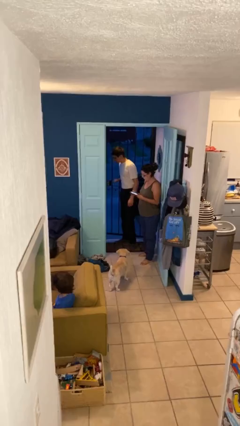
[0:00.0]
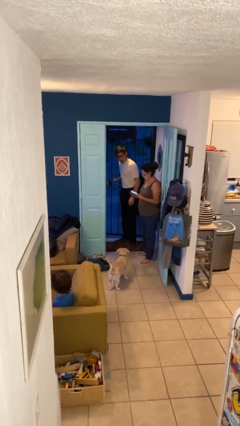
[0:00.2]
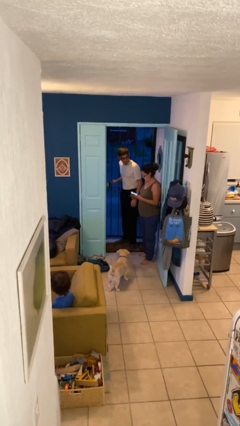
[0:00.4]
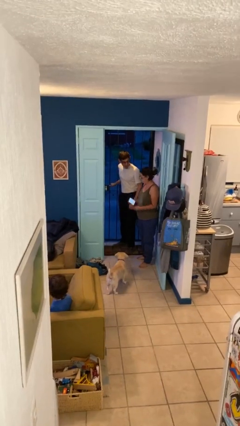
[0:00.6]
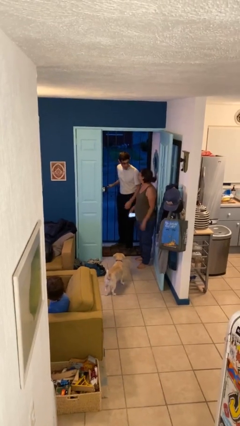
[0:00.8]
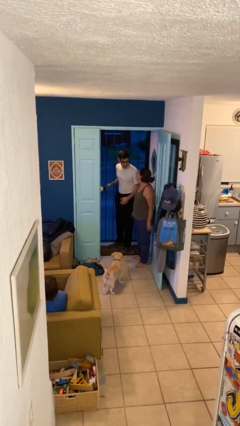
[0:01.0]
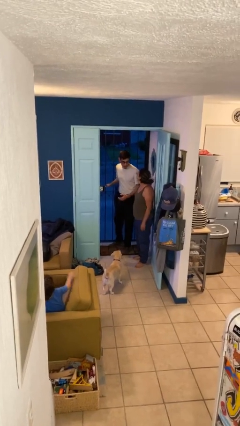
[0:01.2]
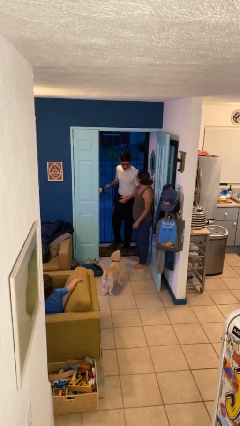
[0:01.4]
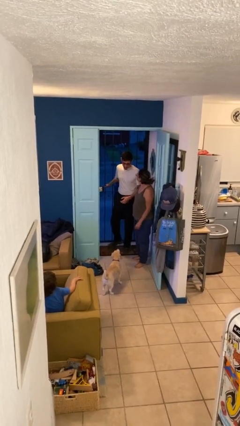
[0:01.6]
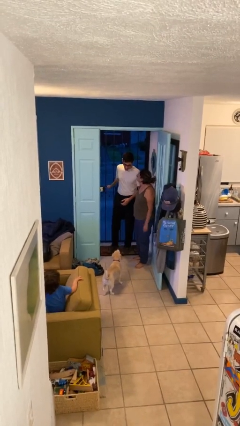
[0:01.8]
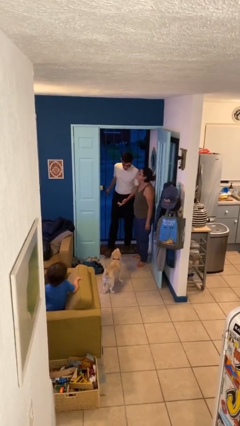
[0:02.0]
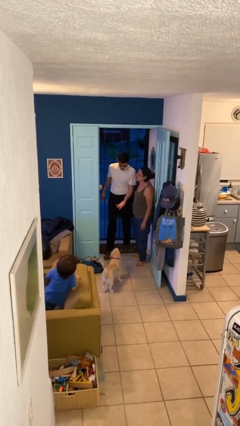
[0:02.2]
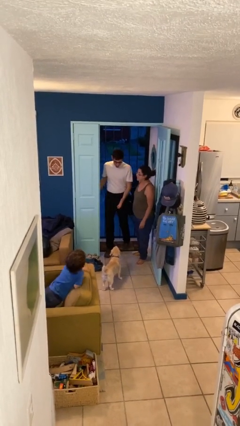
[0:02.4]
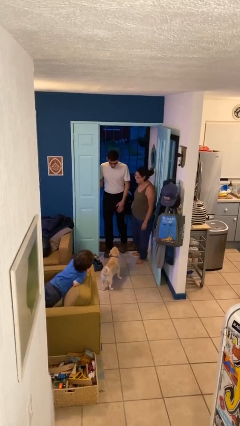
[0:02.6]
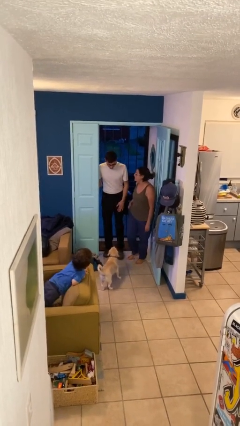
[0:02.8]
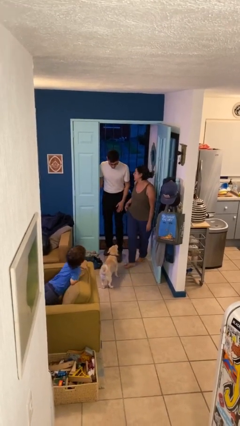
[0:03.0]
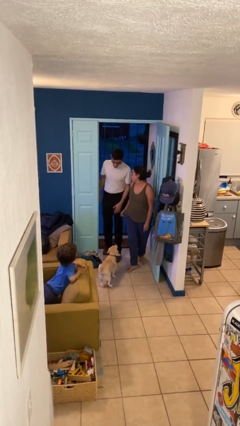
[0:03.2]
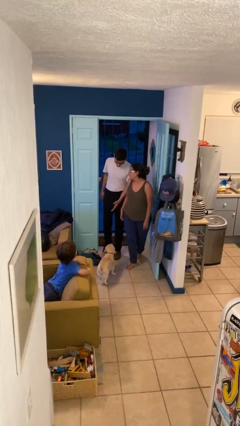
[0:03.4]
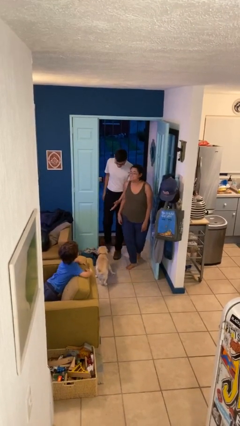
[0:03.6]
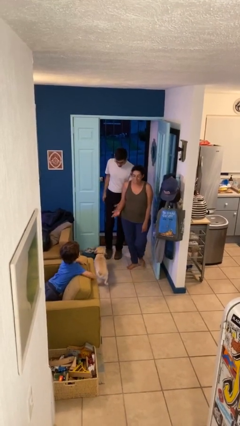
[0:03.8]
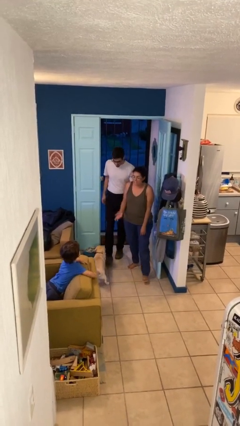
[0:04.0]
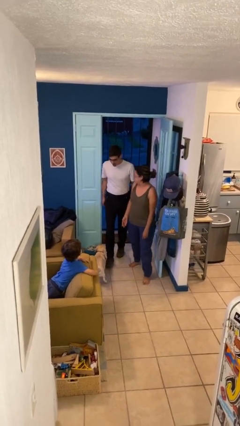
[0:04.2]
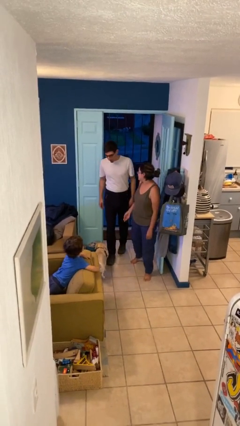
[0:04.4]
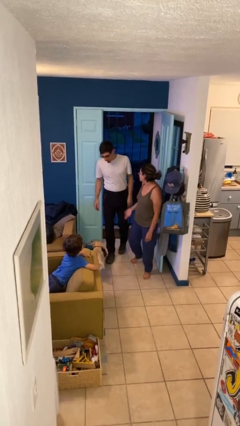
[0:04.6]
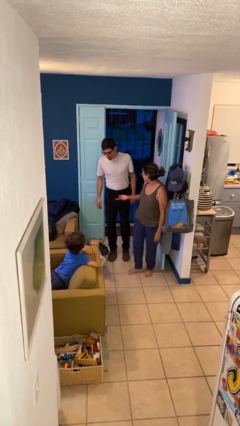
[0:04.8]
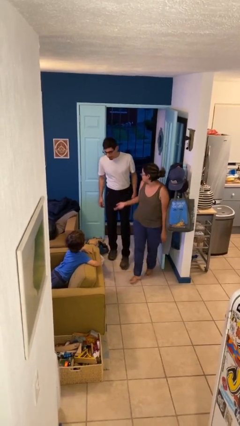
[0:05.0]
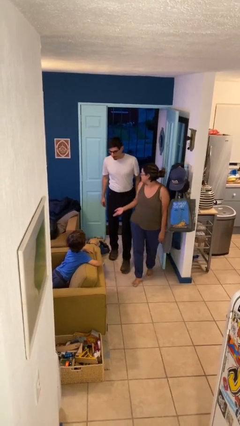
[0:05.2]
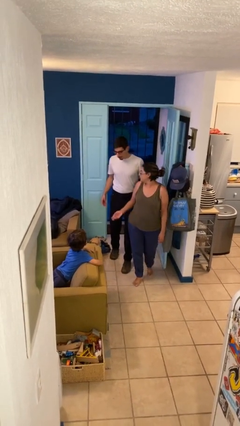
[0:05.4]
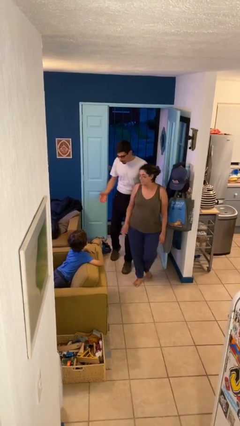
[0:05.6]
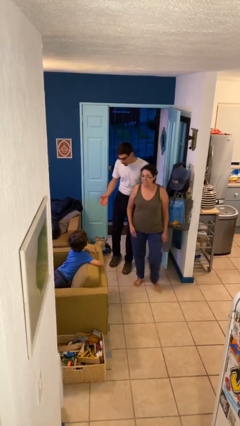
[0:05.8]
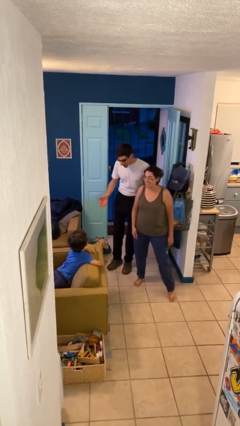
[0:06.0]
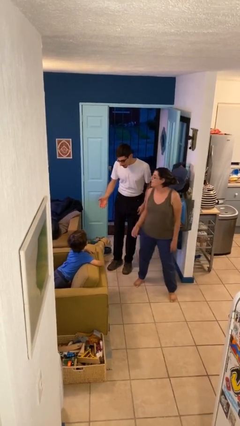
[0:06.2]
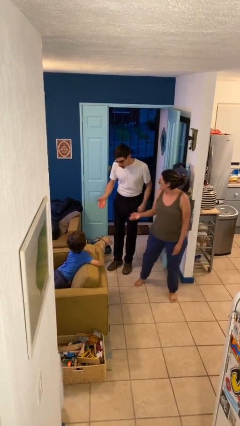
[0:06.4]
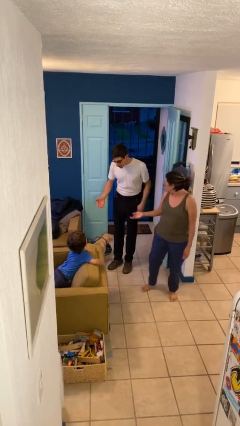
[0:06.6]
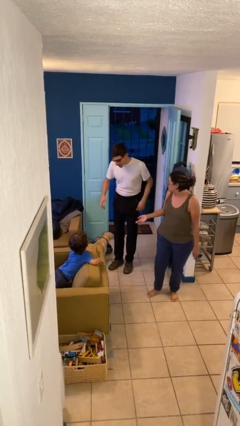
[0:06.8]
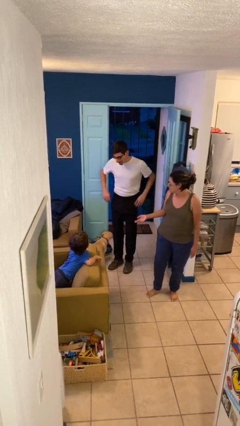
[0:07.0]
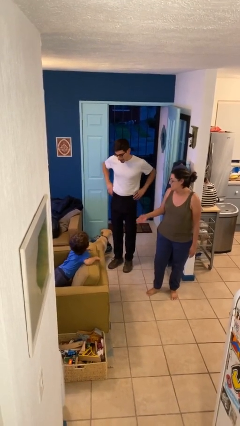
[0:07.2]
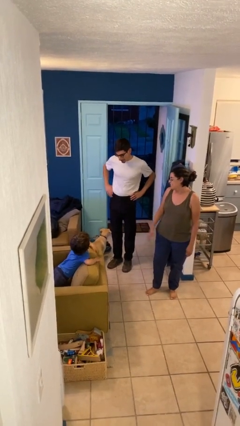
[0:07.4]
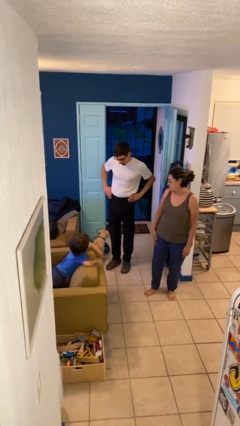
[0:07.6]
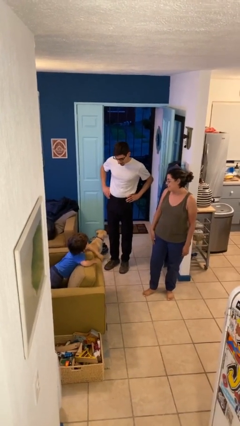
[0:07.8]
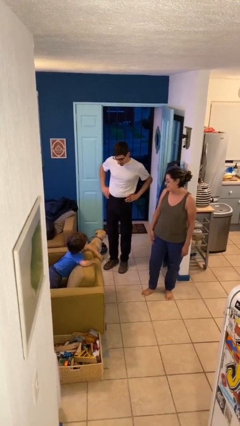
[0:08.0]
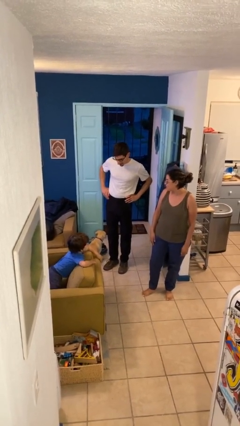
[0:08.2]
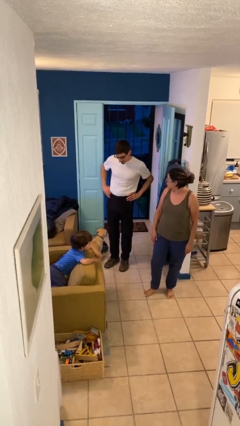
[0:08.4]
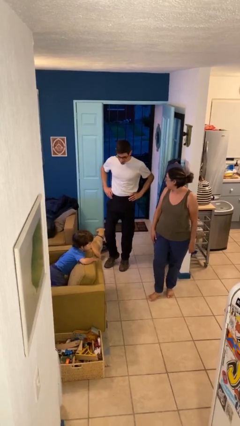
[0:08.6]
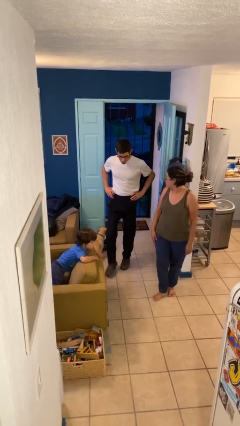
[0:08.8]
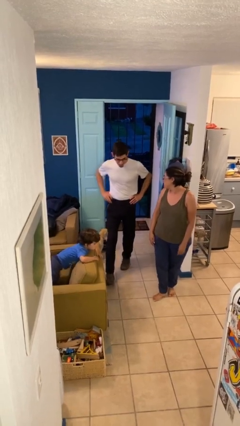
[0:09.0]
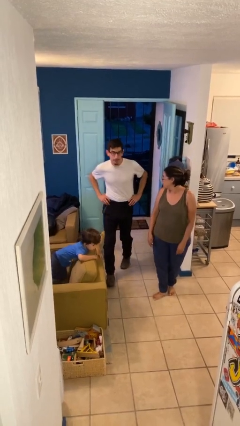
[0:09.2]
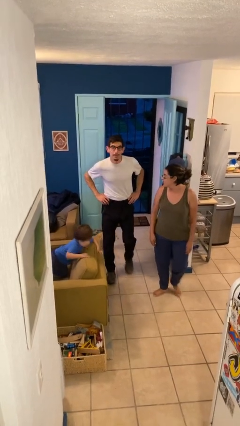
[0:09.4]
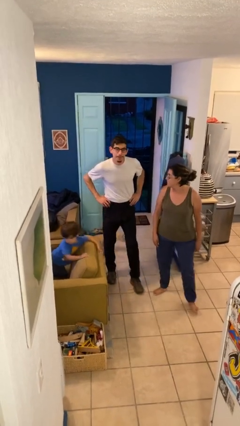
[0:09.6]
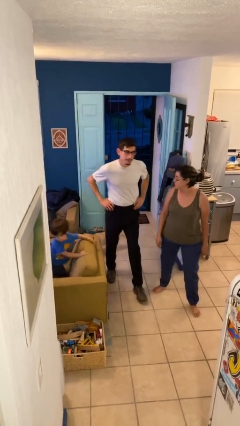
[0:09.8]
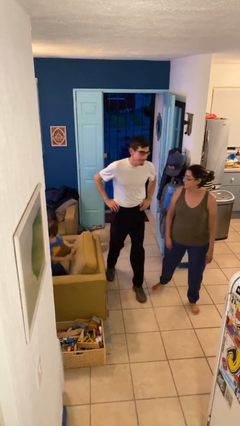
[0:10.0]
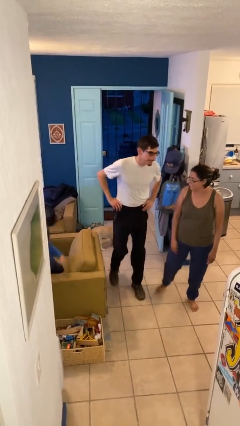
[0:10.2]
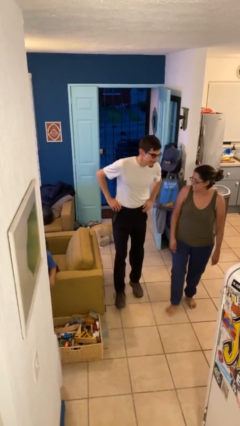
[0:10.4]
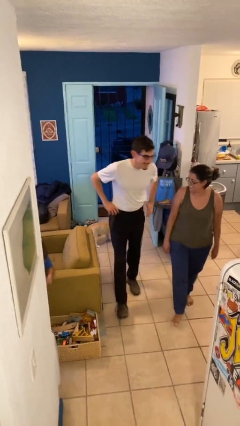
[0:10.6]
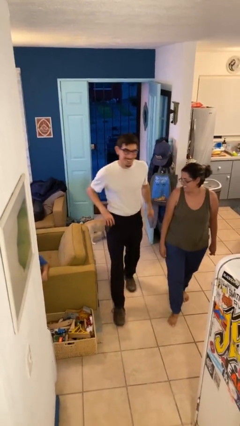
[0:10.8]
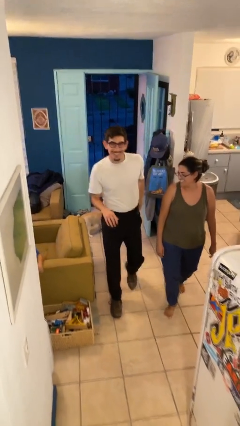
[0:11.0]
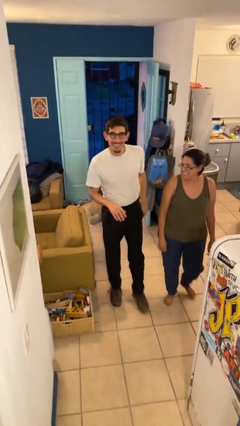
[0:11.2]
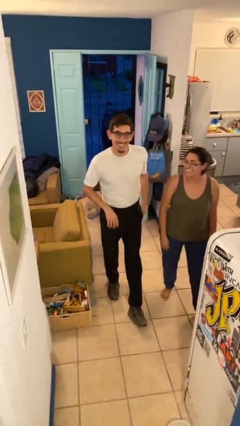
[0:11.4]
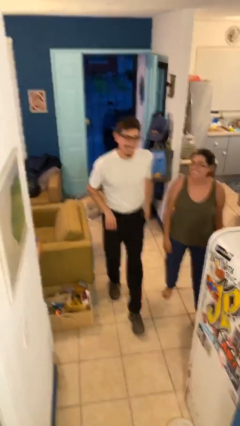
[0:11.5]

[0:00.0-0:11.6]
person talks to person

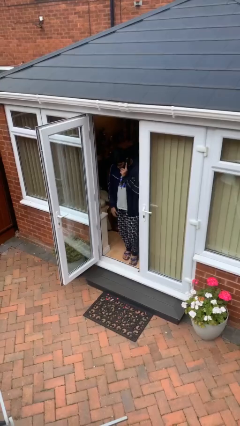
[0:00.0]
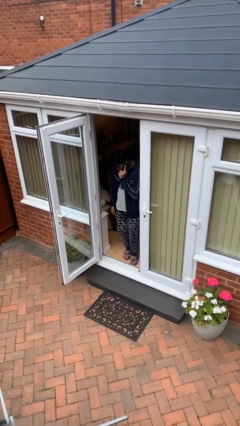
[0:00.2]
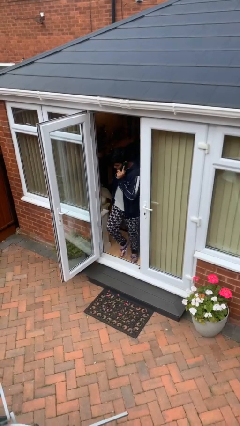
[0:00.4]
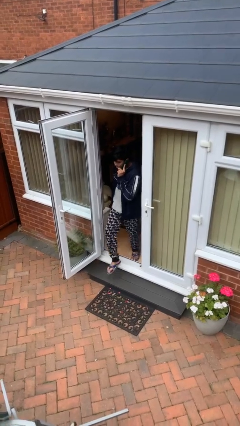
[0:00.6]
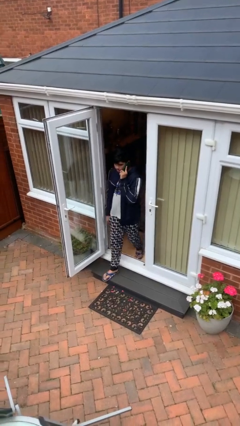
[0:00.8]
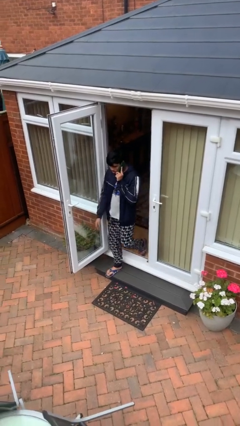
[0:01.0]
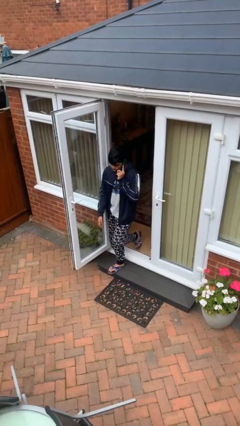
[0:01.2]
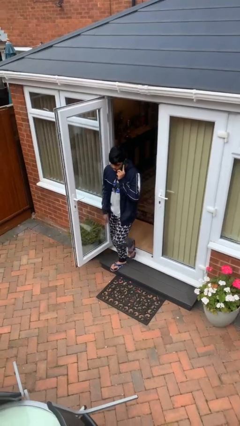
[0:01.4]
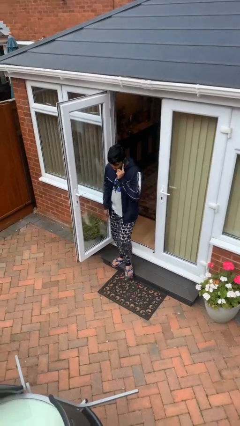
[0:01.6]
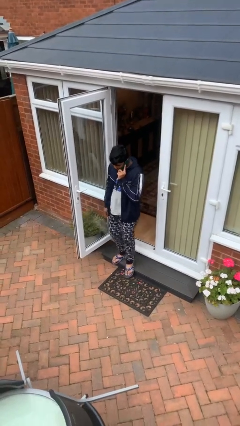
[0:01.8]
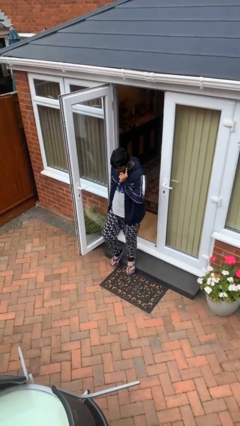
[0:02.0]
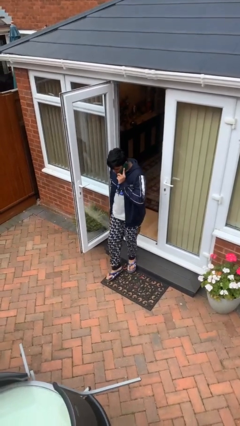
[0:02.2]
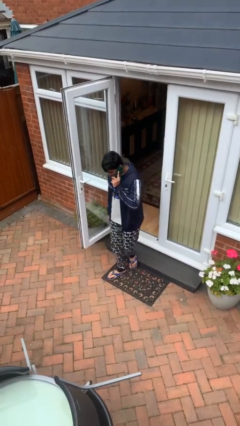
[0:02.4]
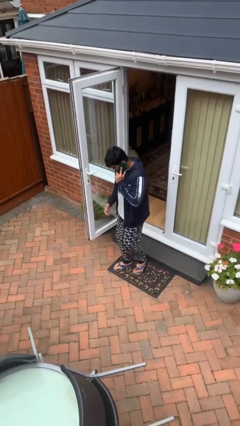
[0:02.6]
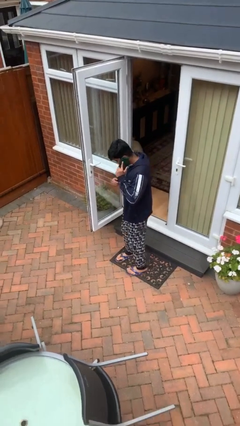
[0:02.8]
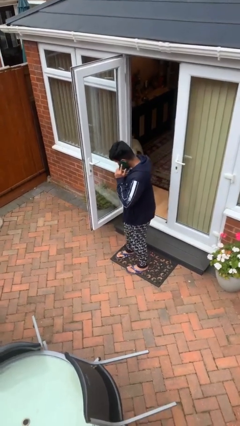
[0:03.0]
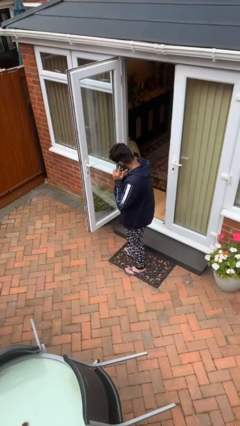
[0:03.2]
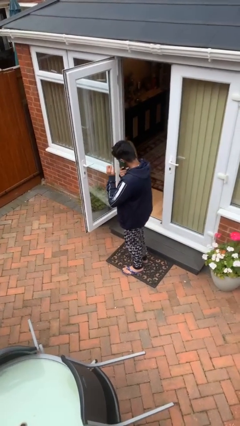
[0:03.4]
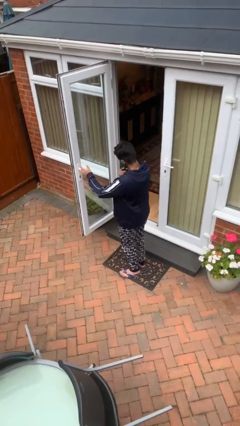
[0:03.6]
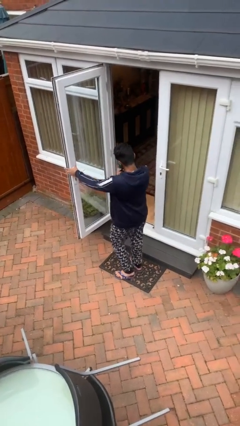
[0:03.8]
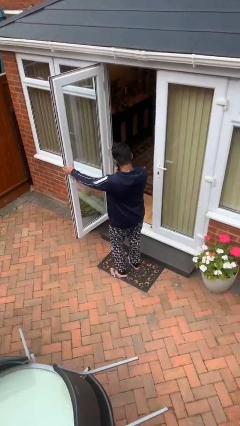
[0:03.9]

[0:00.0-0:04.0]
person enters scene through structure

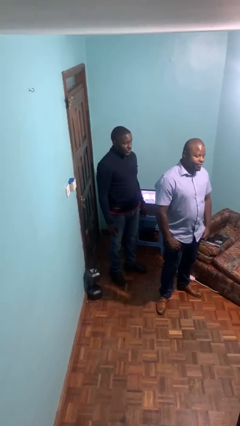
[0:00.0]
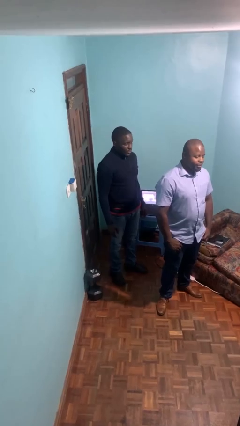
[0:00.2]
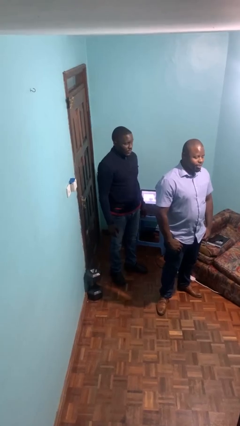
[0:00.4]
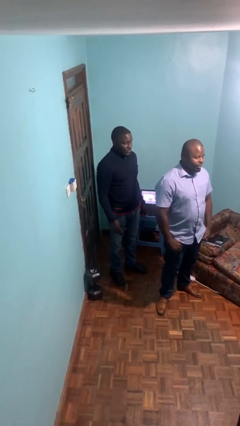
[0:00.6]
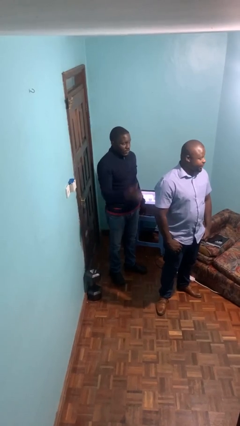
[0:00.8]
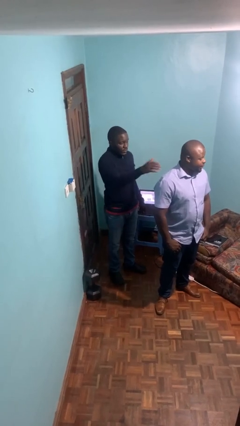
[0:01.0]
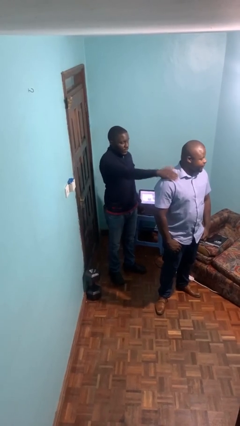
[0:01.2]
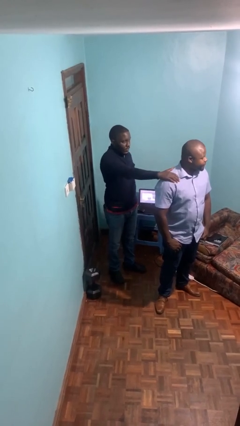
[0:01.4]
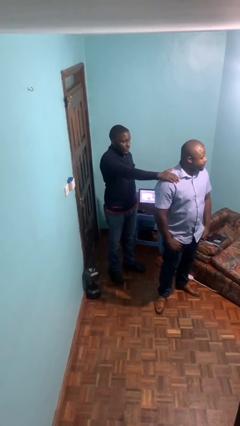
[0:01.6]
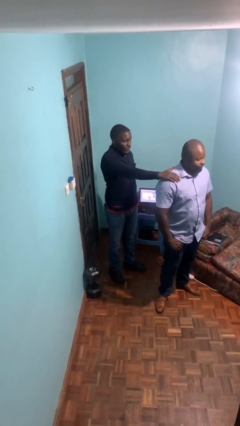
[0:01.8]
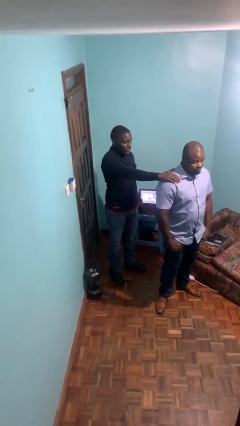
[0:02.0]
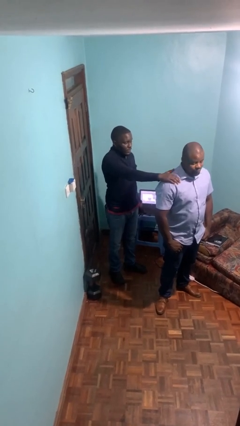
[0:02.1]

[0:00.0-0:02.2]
person grabs person by shoulder
